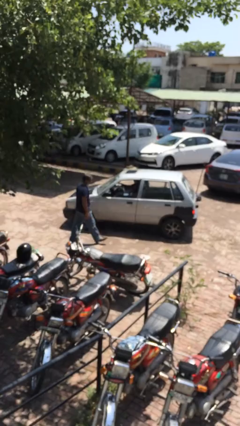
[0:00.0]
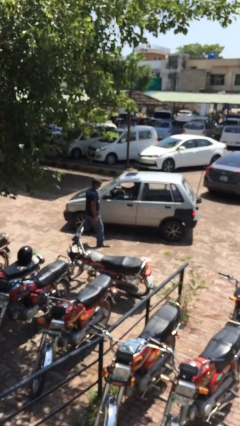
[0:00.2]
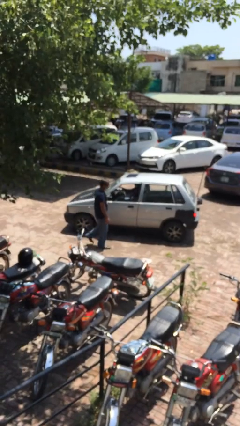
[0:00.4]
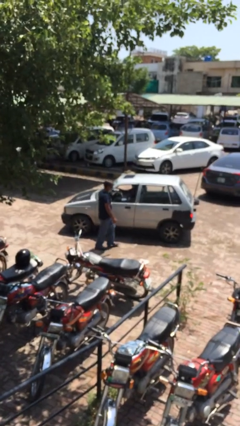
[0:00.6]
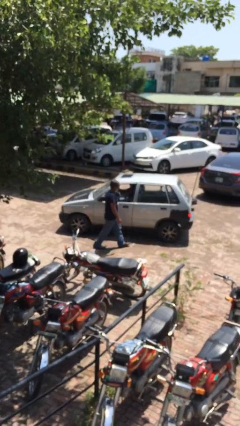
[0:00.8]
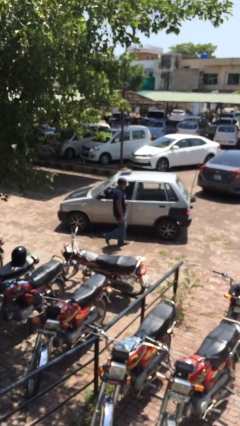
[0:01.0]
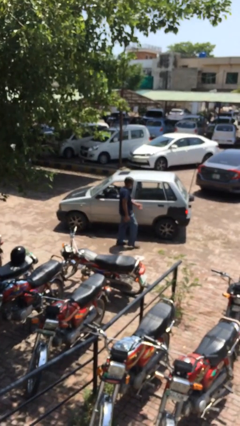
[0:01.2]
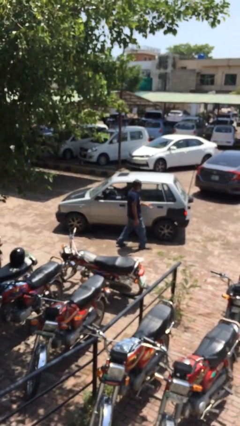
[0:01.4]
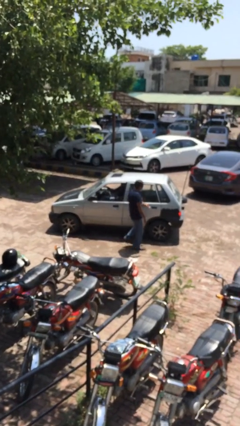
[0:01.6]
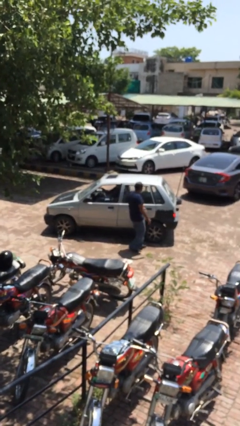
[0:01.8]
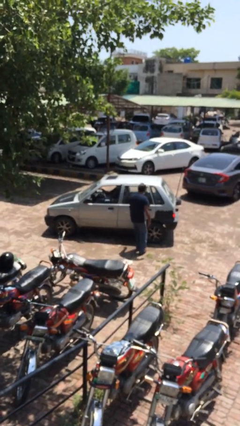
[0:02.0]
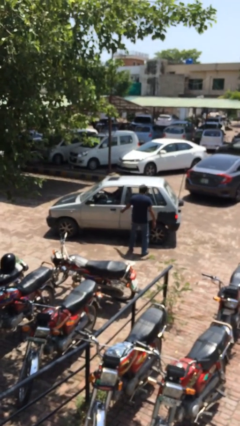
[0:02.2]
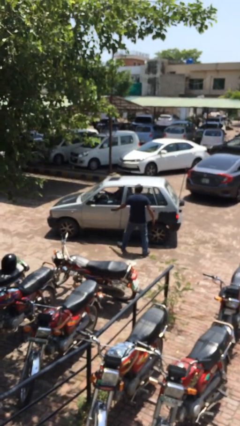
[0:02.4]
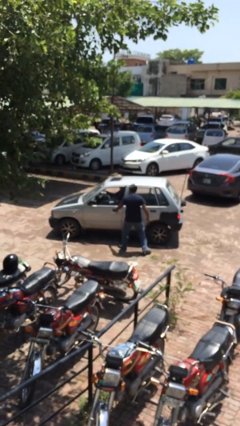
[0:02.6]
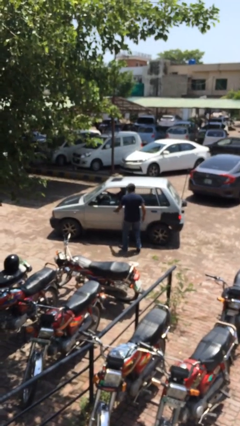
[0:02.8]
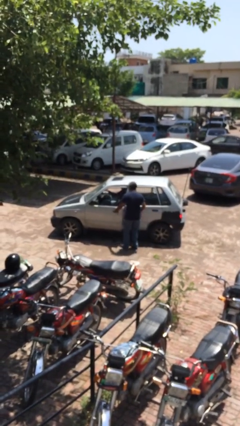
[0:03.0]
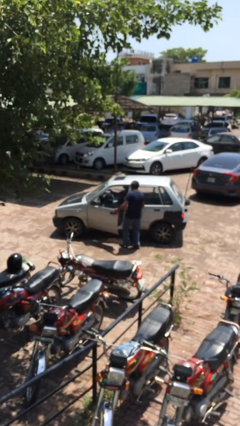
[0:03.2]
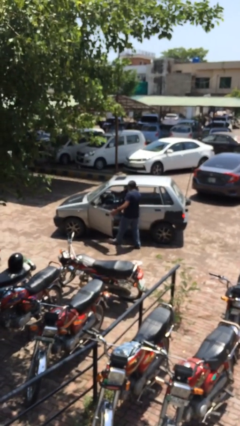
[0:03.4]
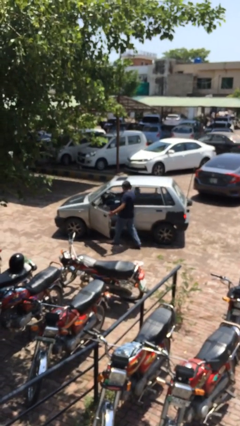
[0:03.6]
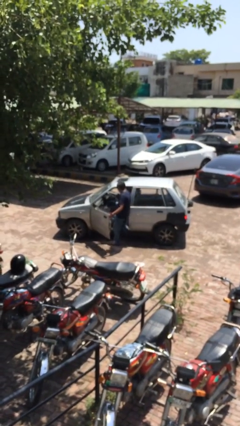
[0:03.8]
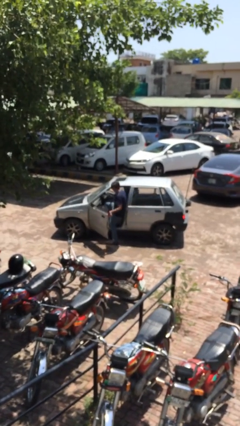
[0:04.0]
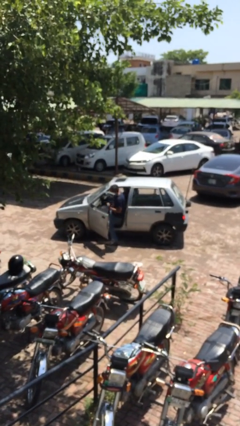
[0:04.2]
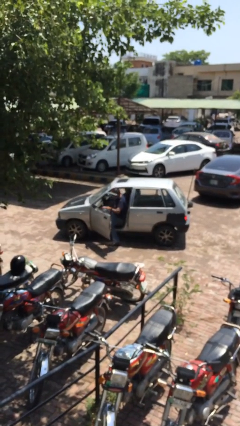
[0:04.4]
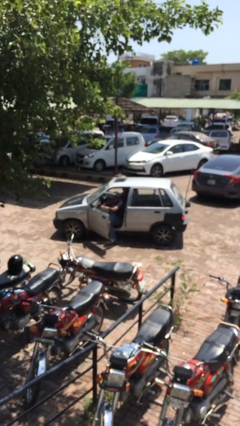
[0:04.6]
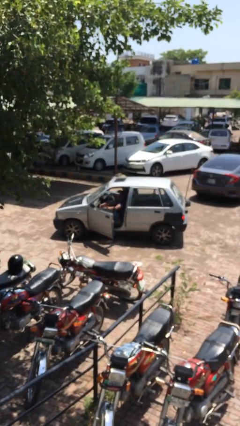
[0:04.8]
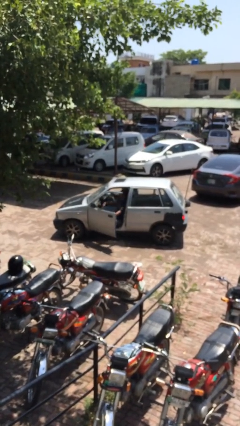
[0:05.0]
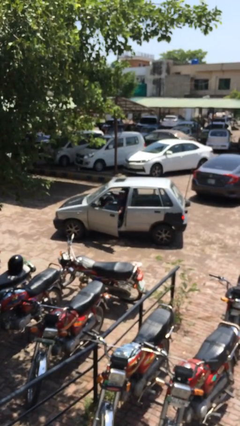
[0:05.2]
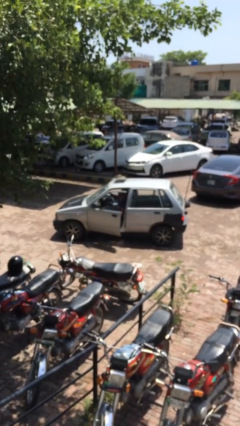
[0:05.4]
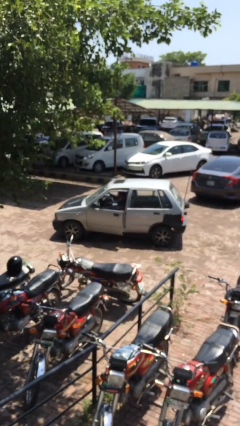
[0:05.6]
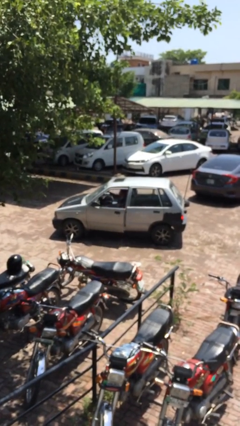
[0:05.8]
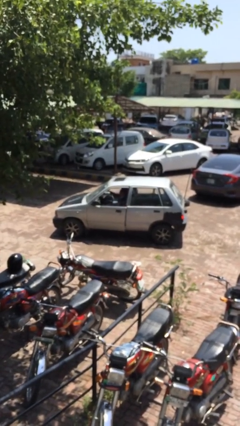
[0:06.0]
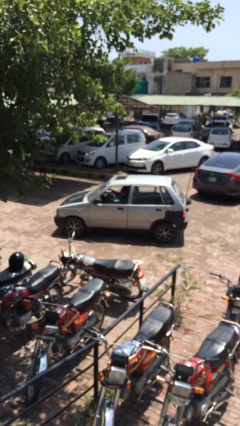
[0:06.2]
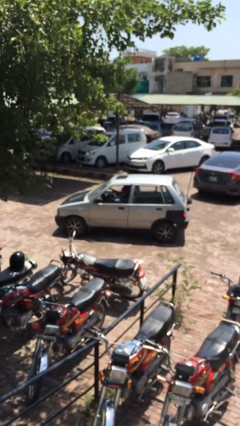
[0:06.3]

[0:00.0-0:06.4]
car picks up person

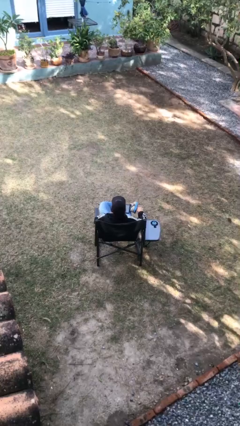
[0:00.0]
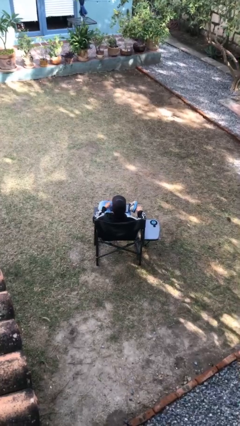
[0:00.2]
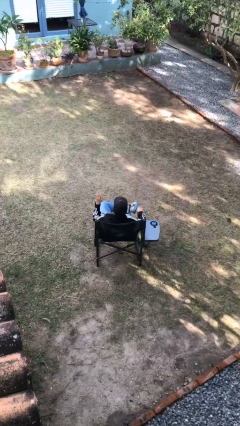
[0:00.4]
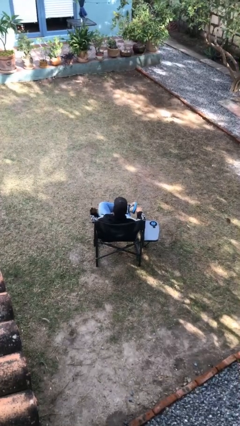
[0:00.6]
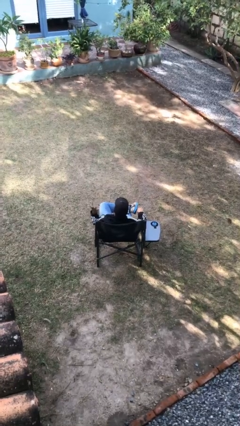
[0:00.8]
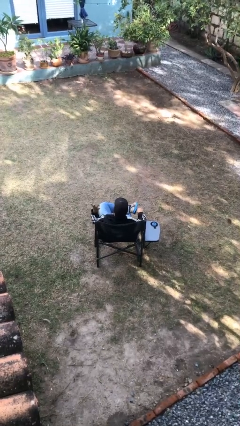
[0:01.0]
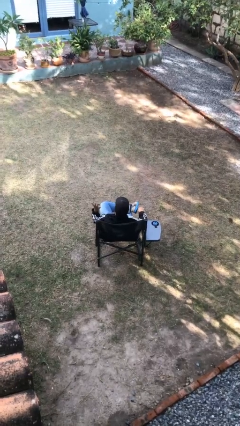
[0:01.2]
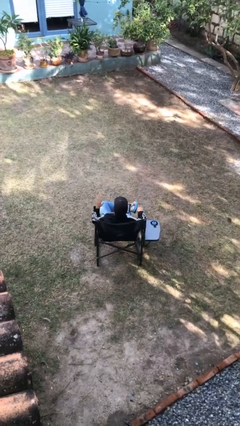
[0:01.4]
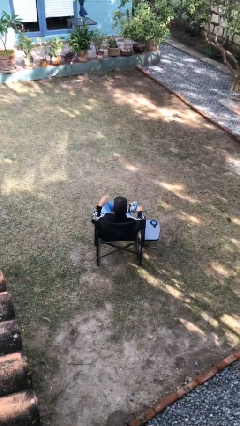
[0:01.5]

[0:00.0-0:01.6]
person gestures number five

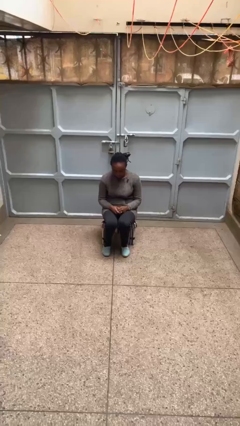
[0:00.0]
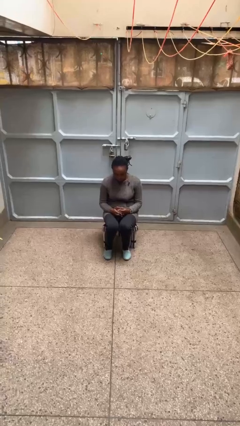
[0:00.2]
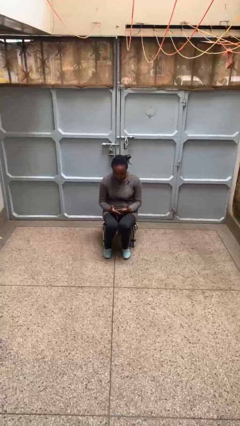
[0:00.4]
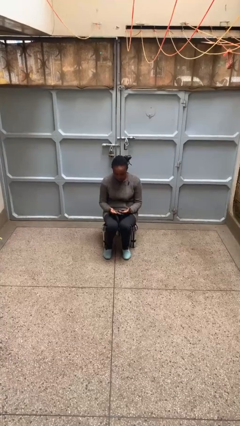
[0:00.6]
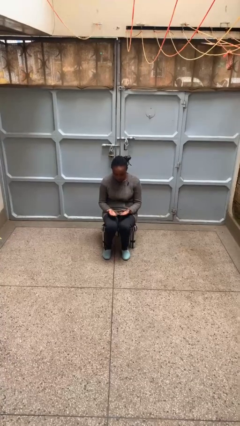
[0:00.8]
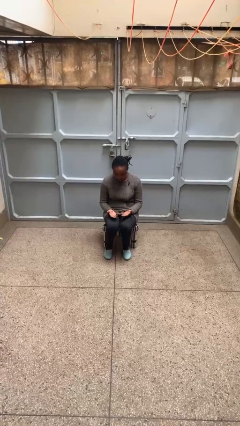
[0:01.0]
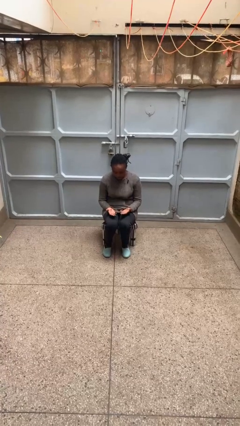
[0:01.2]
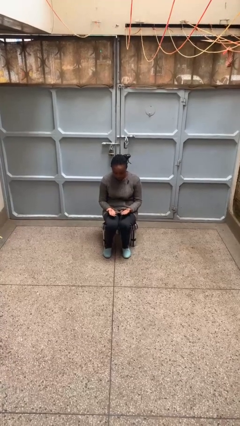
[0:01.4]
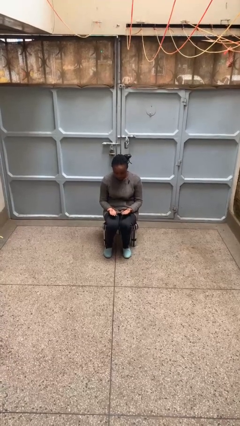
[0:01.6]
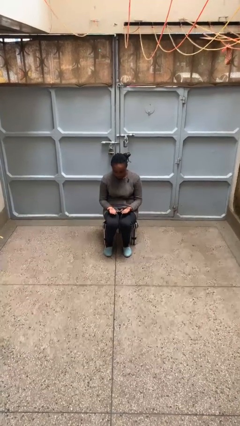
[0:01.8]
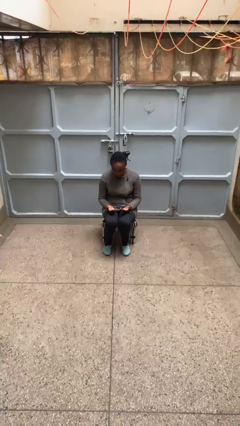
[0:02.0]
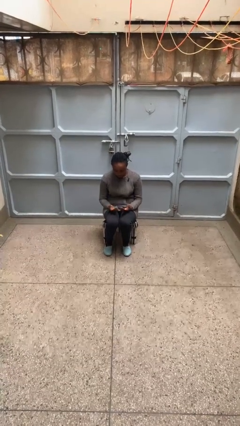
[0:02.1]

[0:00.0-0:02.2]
person looks at hands in lap

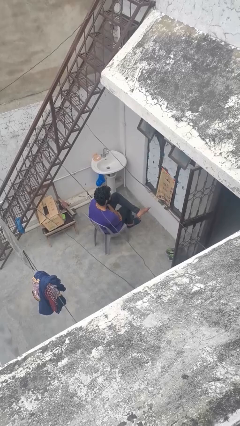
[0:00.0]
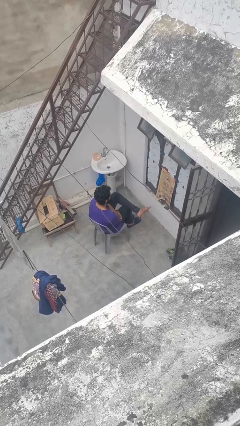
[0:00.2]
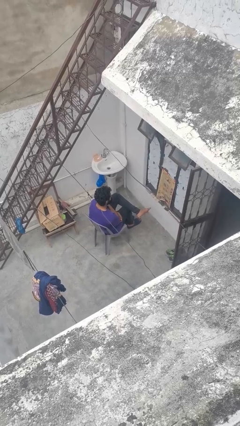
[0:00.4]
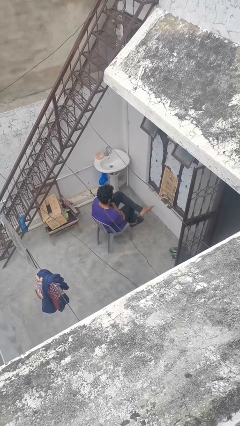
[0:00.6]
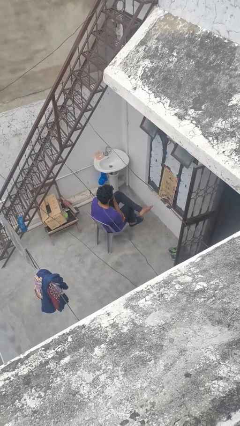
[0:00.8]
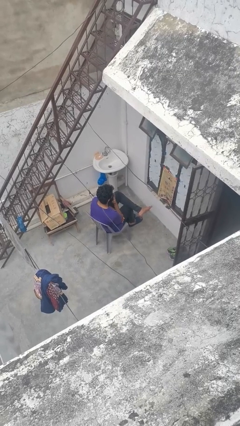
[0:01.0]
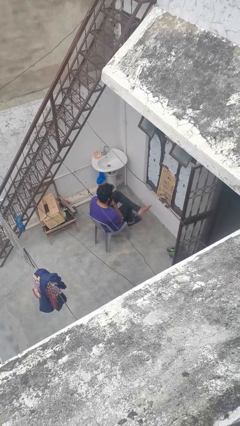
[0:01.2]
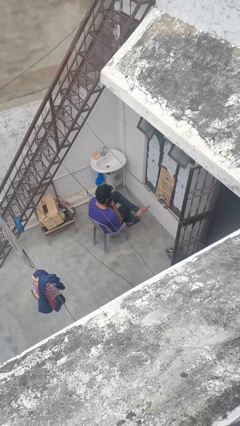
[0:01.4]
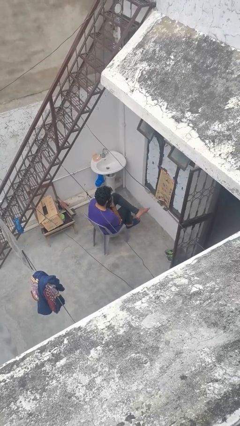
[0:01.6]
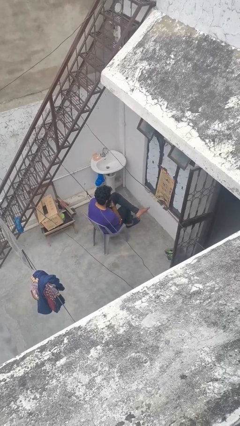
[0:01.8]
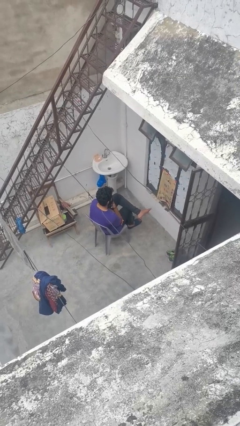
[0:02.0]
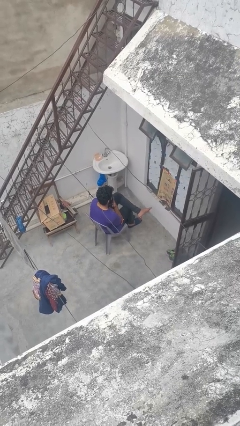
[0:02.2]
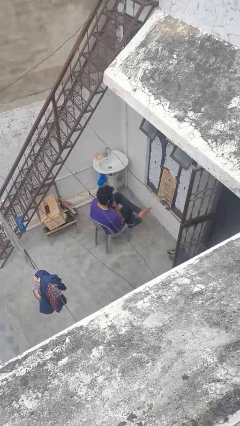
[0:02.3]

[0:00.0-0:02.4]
person strokes chin

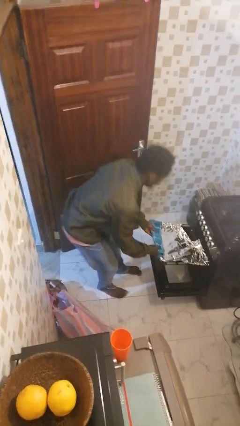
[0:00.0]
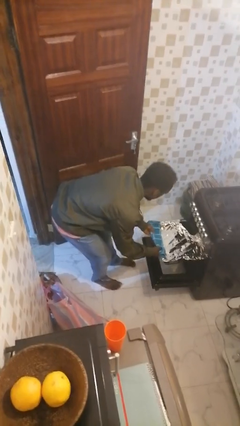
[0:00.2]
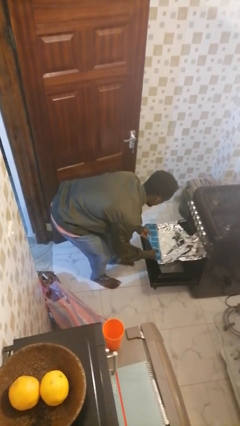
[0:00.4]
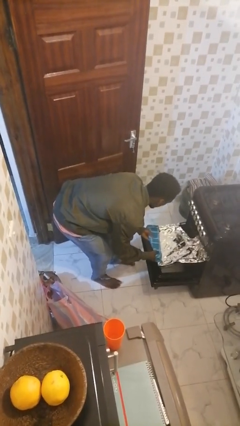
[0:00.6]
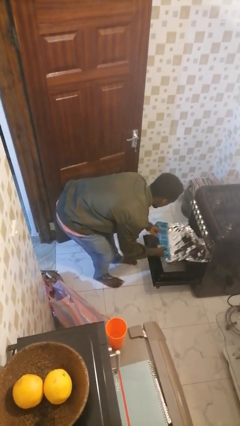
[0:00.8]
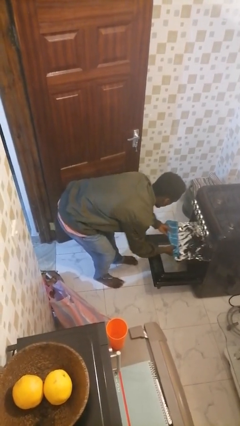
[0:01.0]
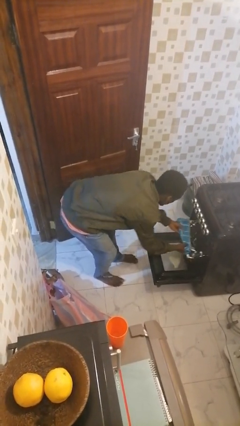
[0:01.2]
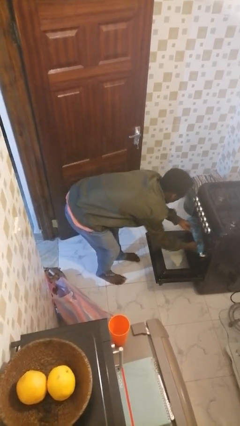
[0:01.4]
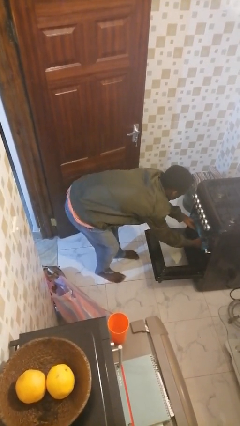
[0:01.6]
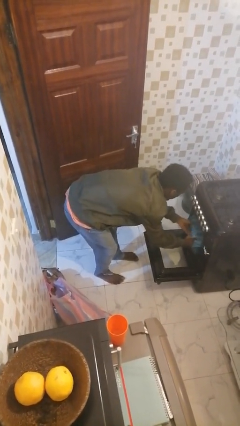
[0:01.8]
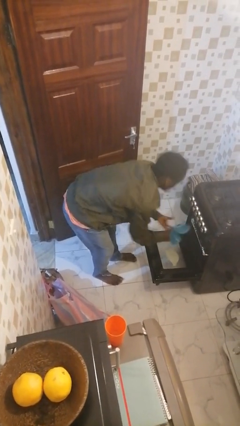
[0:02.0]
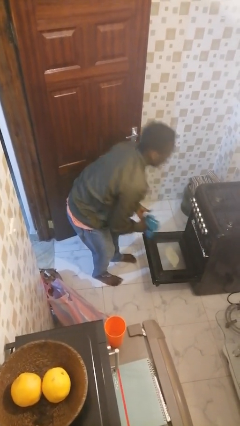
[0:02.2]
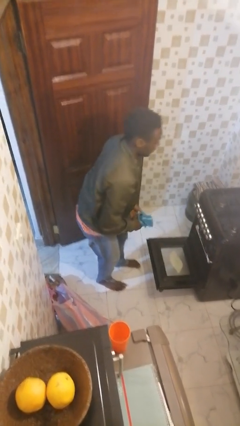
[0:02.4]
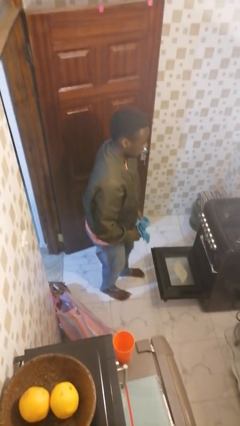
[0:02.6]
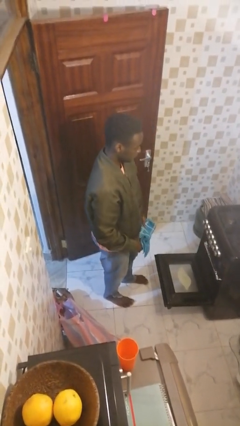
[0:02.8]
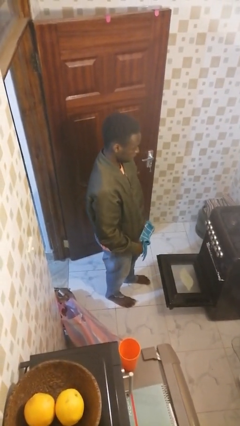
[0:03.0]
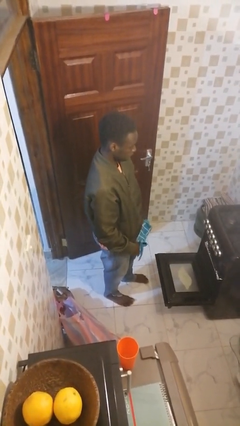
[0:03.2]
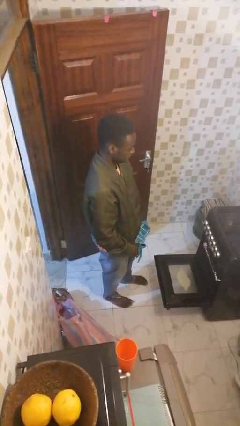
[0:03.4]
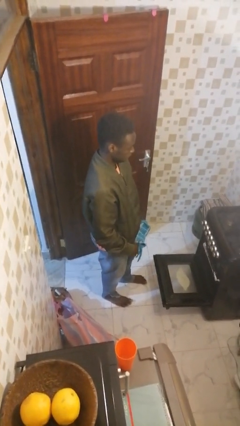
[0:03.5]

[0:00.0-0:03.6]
person puts object into oven

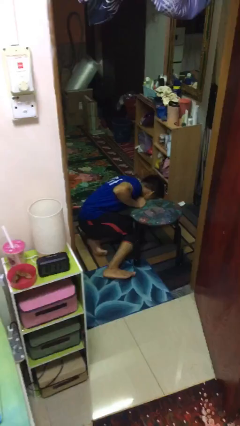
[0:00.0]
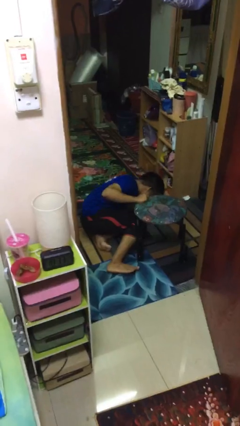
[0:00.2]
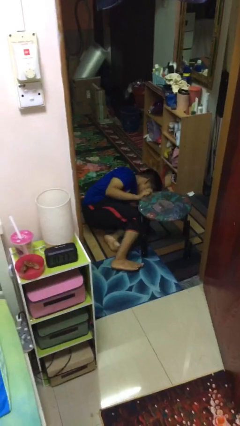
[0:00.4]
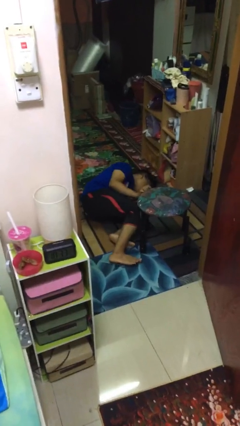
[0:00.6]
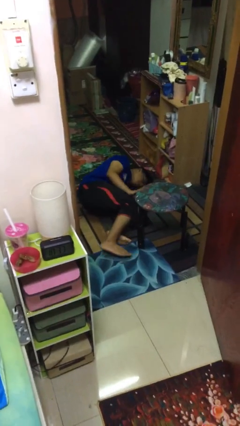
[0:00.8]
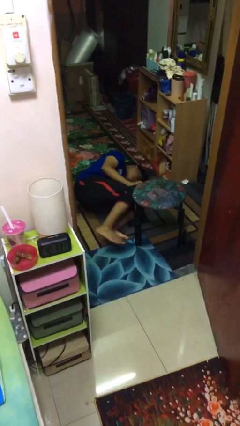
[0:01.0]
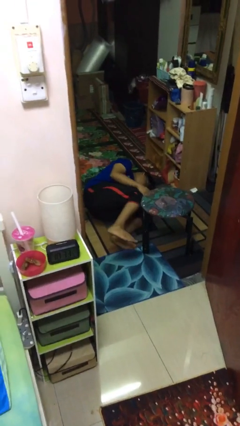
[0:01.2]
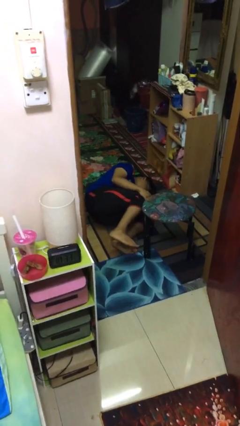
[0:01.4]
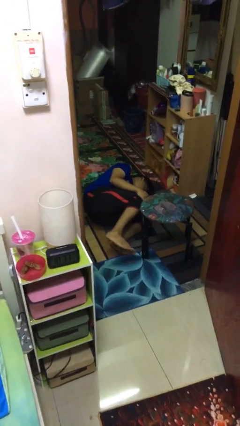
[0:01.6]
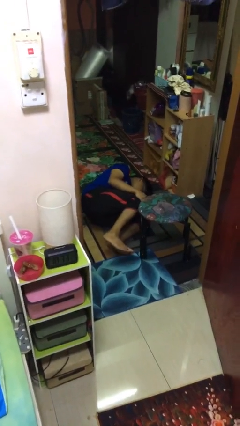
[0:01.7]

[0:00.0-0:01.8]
person lies down on floor
